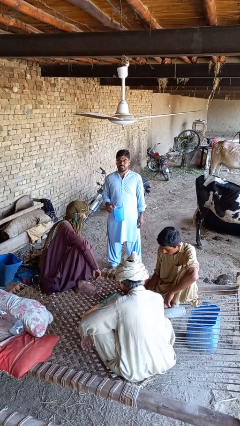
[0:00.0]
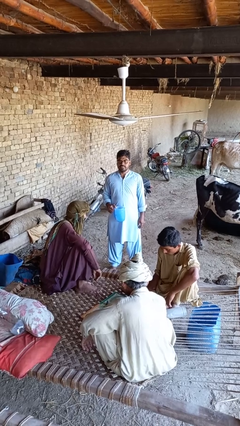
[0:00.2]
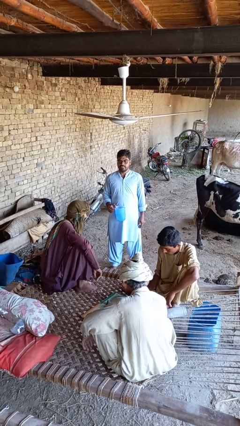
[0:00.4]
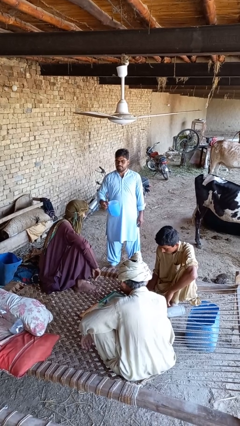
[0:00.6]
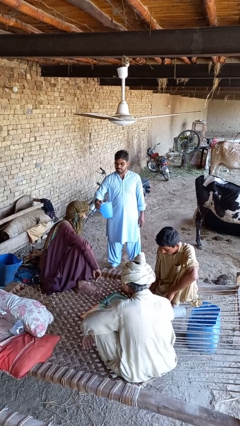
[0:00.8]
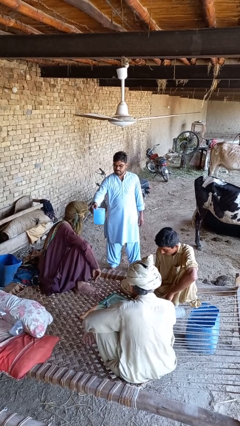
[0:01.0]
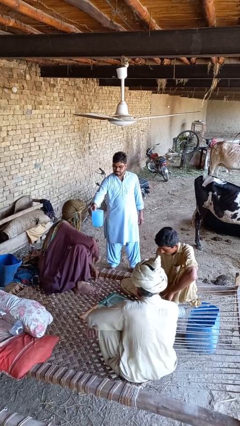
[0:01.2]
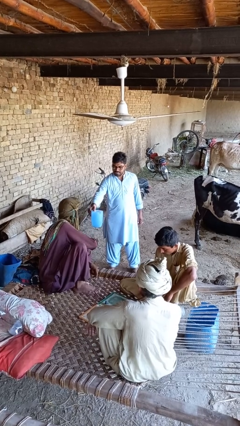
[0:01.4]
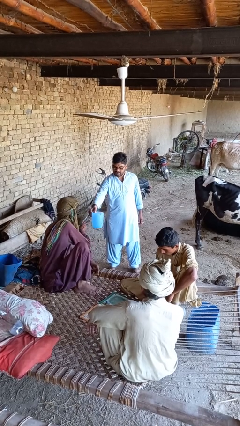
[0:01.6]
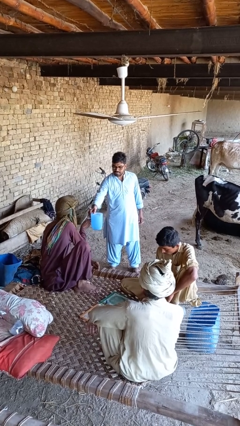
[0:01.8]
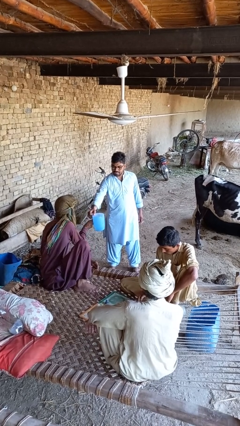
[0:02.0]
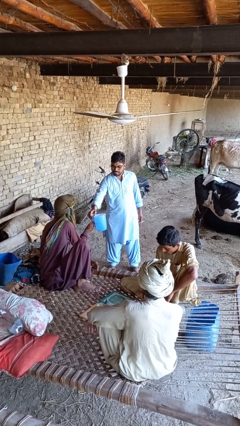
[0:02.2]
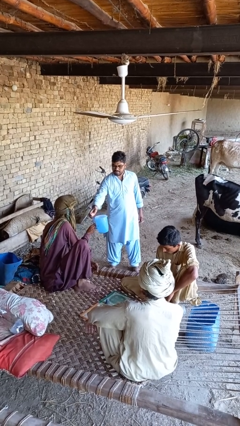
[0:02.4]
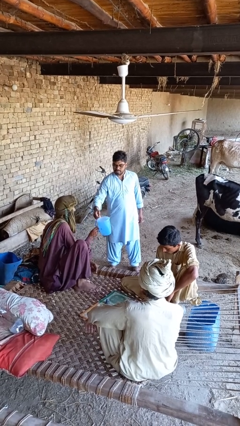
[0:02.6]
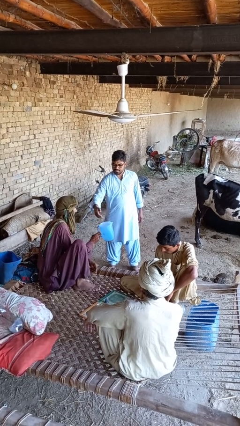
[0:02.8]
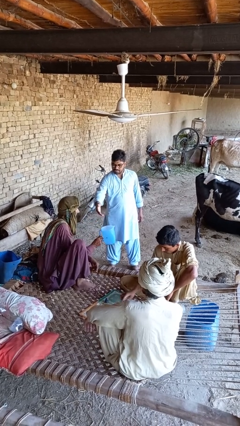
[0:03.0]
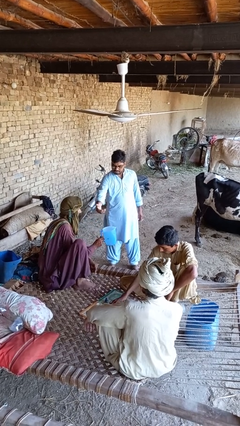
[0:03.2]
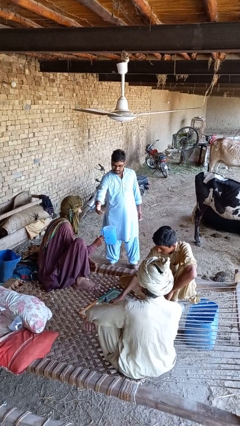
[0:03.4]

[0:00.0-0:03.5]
person transfers object to person

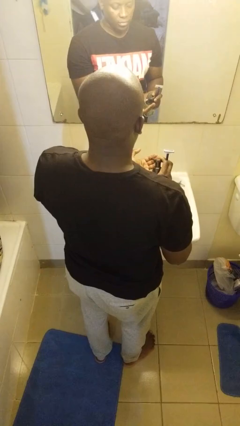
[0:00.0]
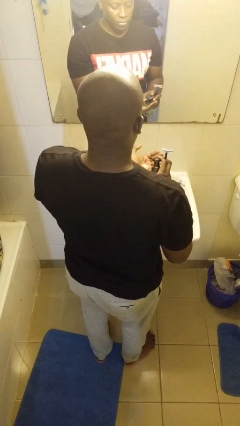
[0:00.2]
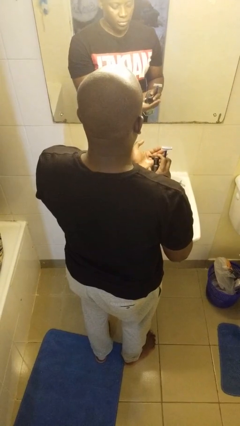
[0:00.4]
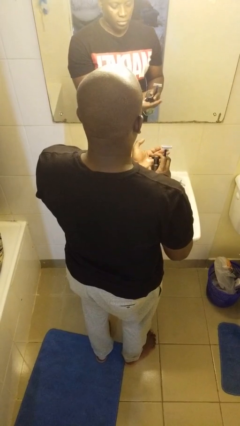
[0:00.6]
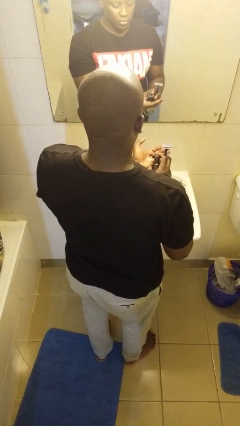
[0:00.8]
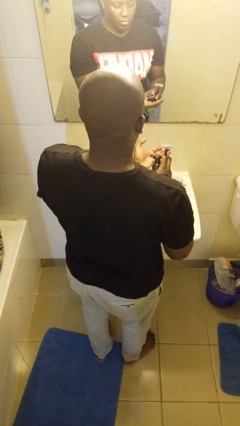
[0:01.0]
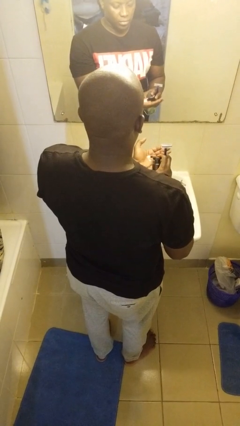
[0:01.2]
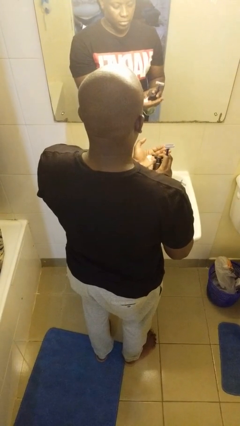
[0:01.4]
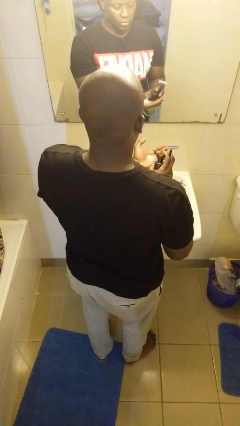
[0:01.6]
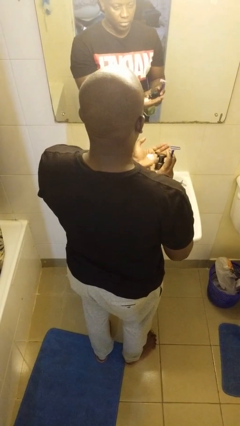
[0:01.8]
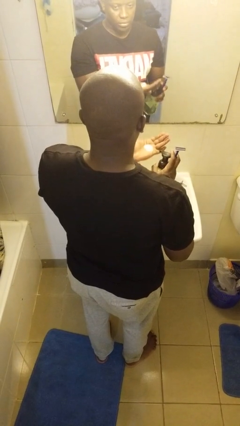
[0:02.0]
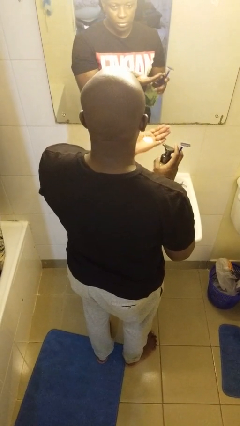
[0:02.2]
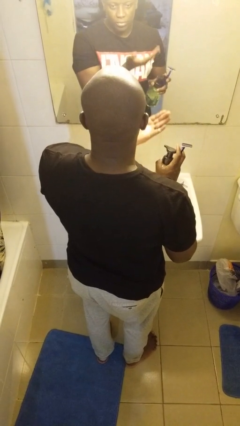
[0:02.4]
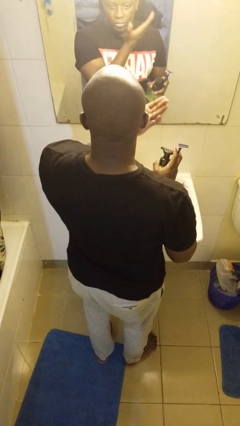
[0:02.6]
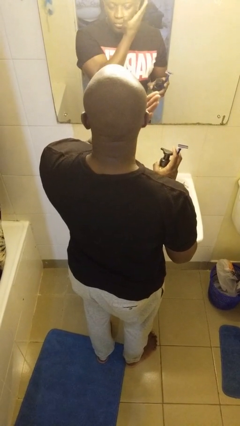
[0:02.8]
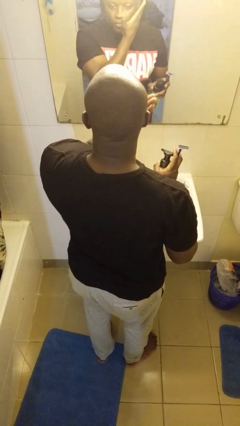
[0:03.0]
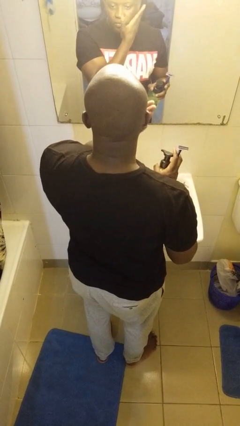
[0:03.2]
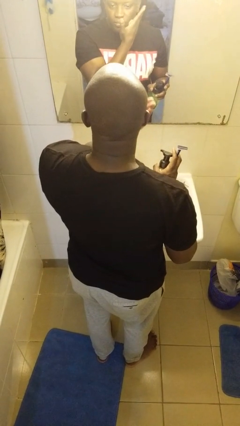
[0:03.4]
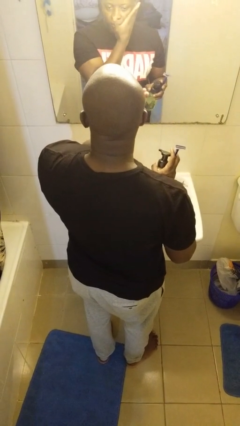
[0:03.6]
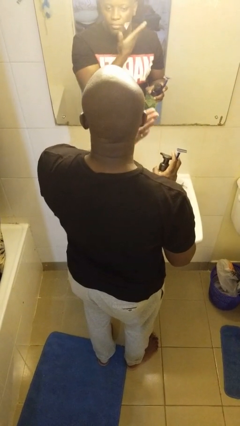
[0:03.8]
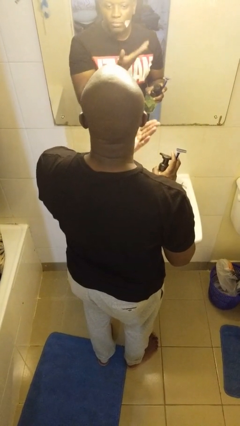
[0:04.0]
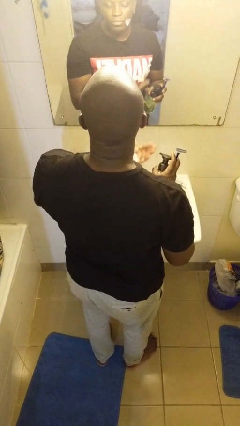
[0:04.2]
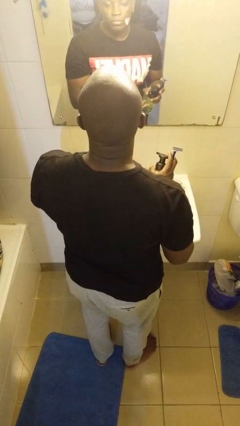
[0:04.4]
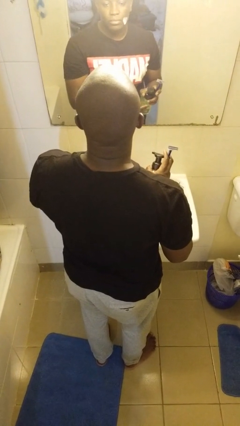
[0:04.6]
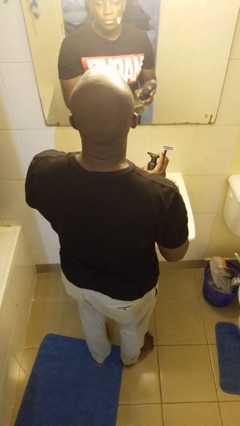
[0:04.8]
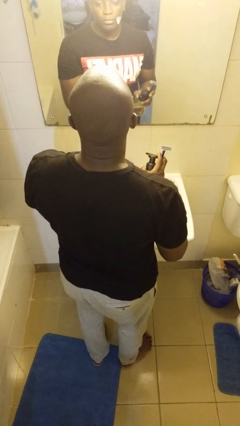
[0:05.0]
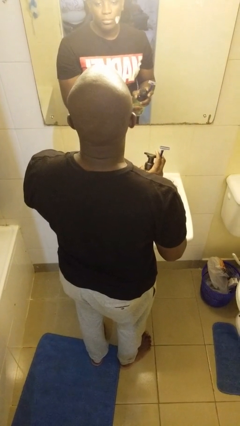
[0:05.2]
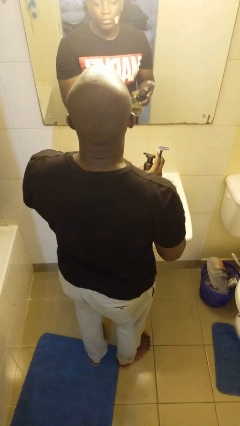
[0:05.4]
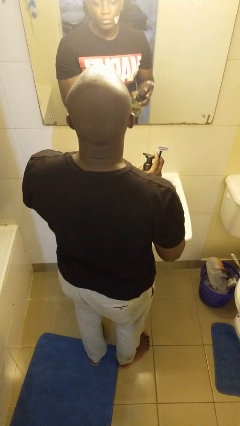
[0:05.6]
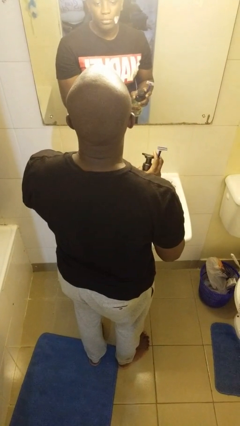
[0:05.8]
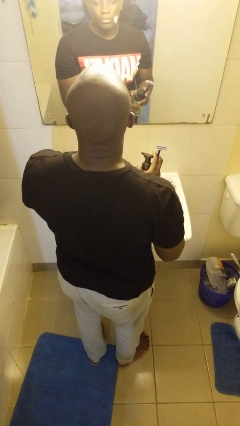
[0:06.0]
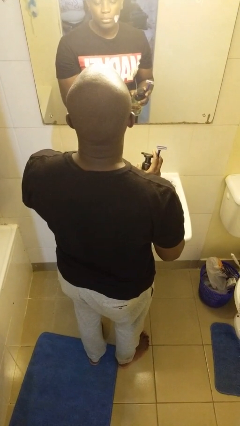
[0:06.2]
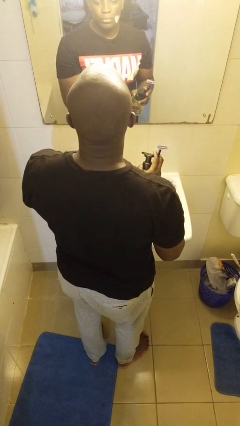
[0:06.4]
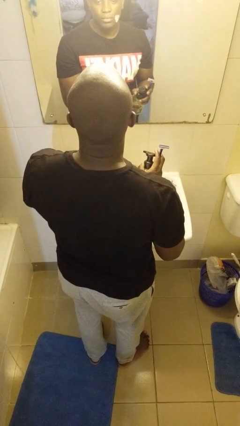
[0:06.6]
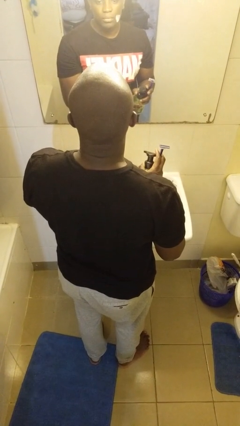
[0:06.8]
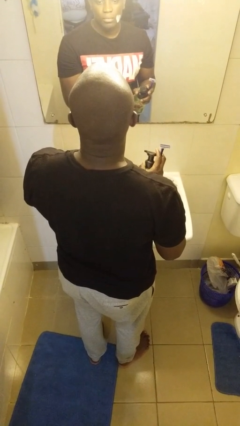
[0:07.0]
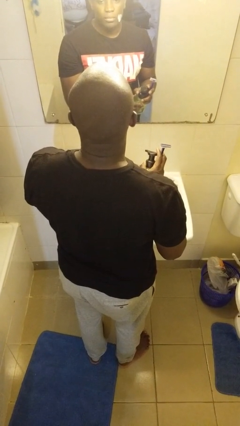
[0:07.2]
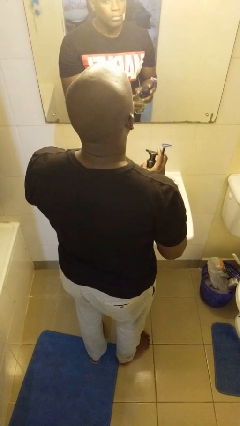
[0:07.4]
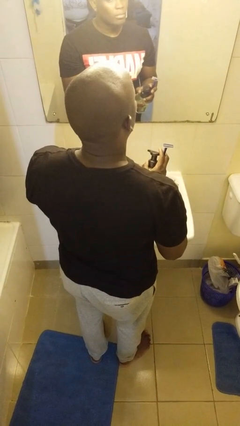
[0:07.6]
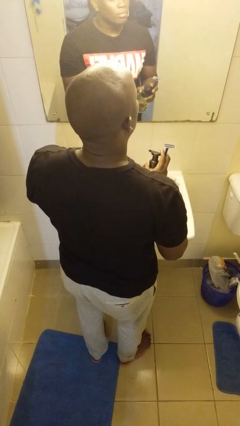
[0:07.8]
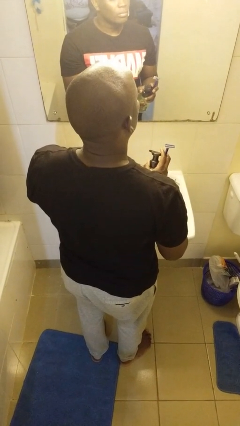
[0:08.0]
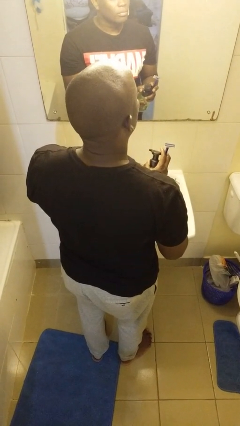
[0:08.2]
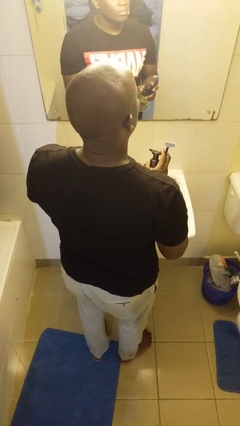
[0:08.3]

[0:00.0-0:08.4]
person applies shaving cream

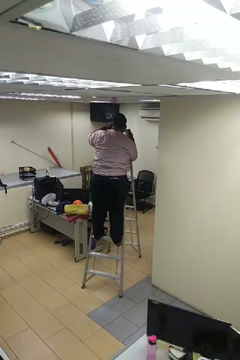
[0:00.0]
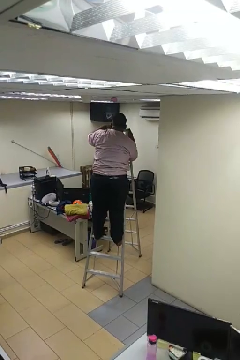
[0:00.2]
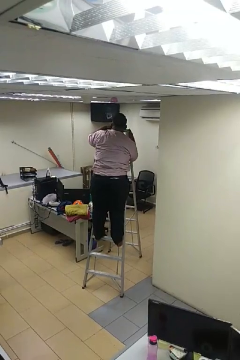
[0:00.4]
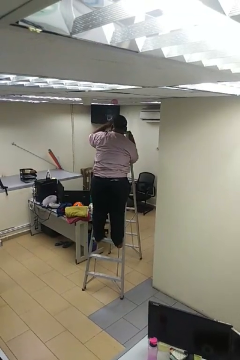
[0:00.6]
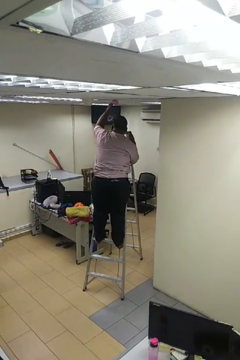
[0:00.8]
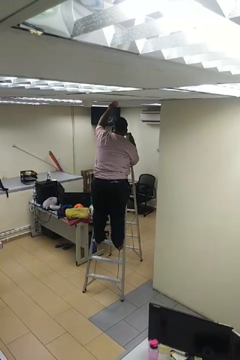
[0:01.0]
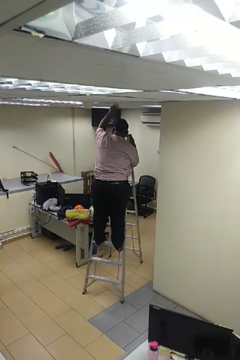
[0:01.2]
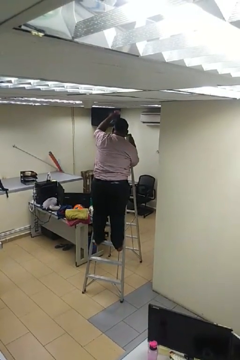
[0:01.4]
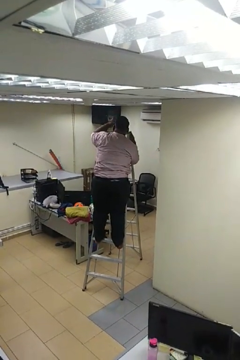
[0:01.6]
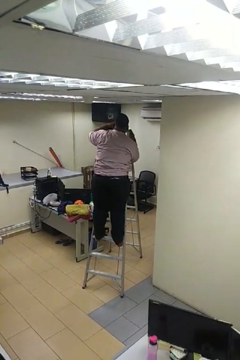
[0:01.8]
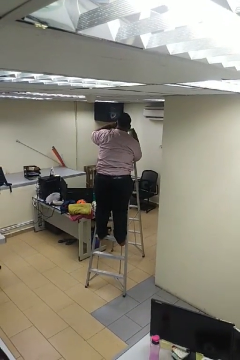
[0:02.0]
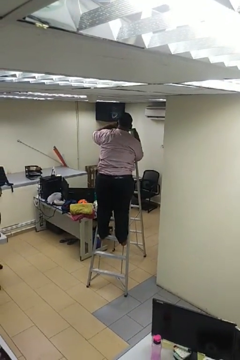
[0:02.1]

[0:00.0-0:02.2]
person takes down smoke detector

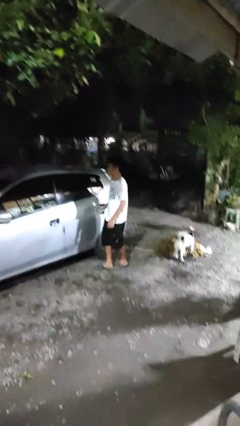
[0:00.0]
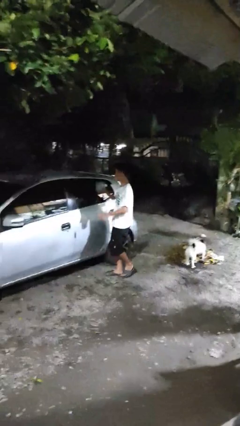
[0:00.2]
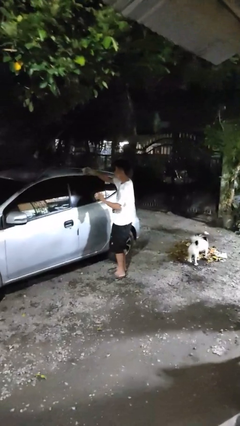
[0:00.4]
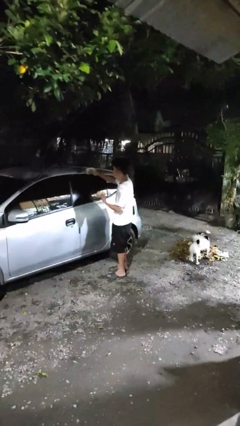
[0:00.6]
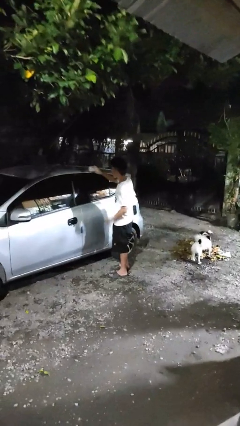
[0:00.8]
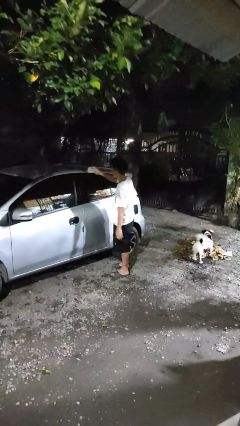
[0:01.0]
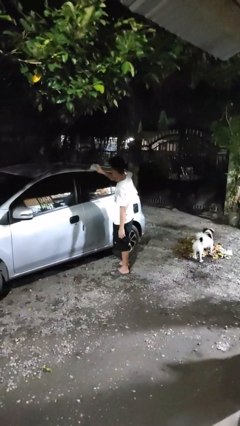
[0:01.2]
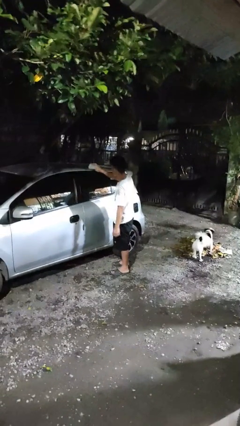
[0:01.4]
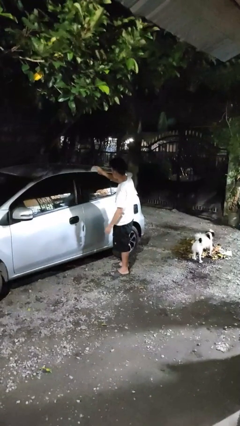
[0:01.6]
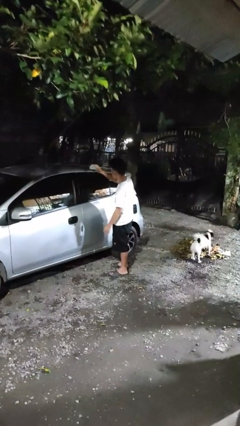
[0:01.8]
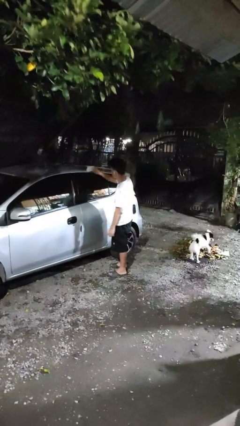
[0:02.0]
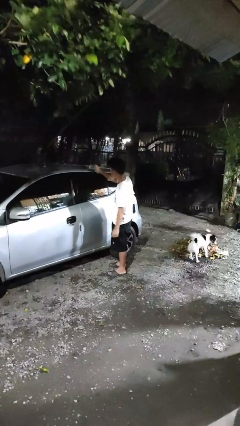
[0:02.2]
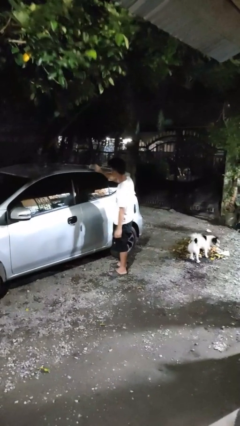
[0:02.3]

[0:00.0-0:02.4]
person polishes car with rag

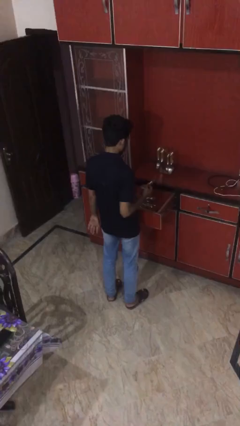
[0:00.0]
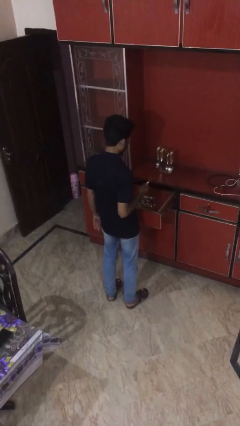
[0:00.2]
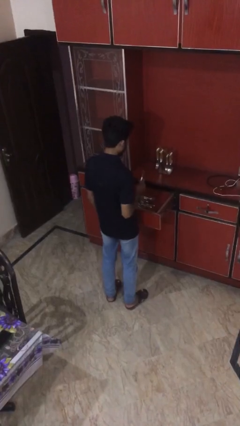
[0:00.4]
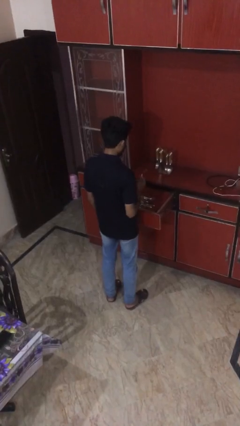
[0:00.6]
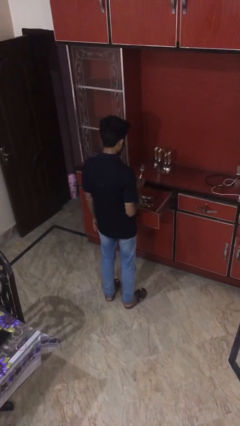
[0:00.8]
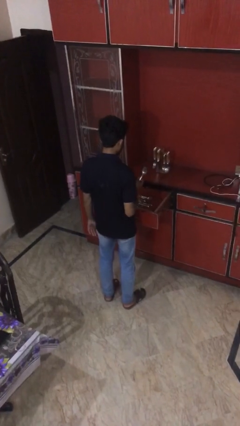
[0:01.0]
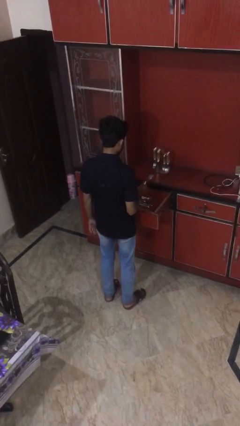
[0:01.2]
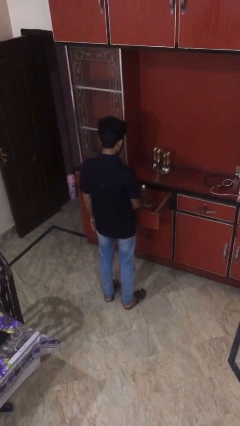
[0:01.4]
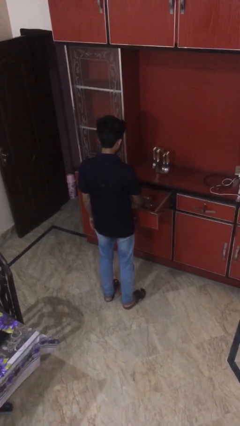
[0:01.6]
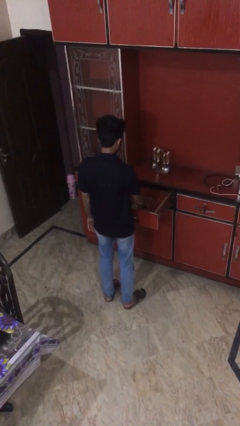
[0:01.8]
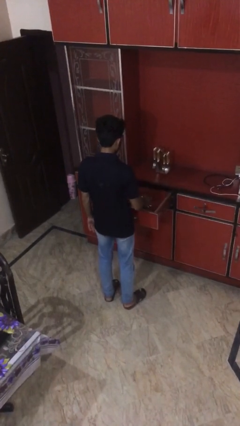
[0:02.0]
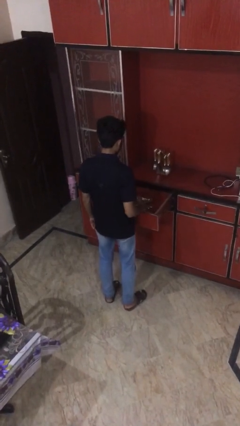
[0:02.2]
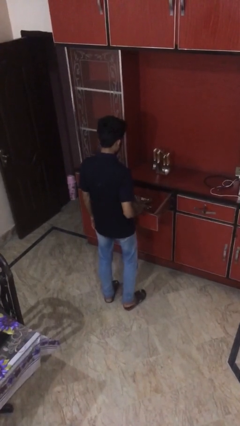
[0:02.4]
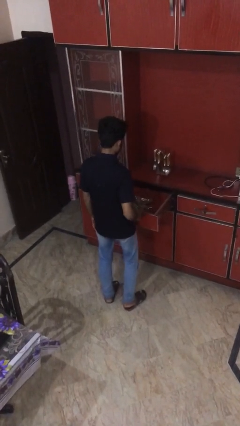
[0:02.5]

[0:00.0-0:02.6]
person puts object into kitchen drawer
